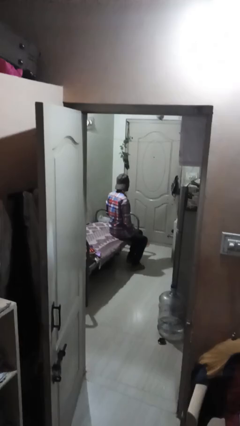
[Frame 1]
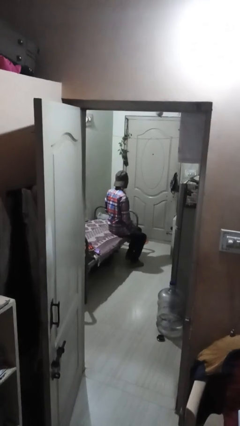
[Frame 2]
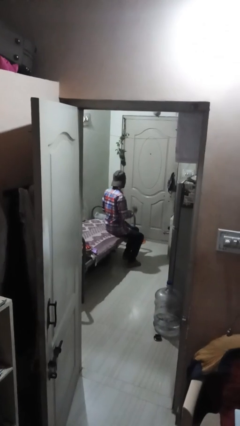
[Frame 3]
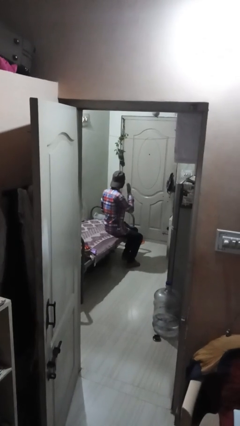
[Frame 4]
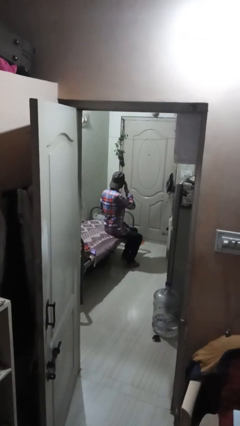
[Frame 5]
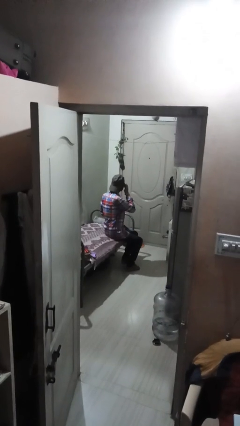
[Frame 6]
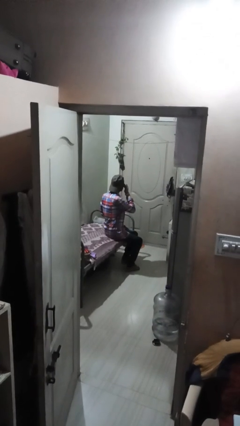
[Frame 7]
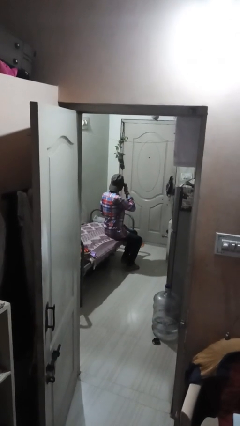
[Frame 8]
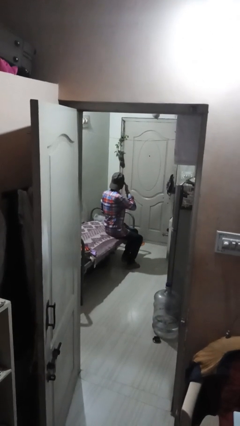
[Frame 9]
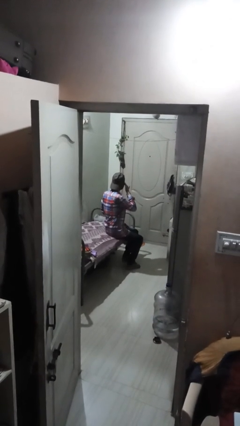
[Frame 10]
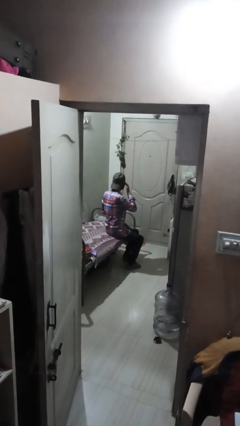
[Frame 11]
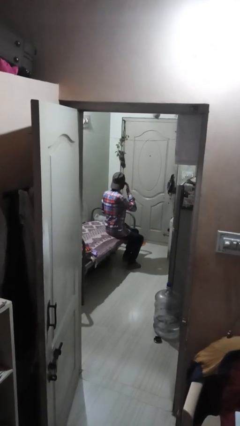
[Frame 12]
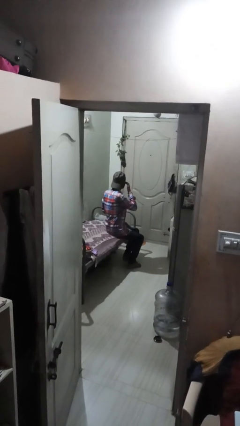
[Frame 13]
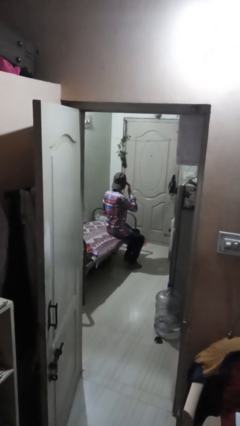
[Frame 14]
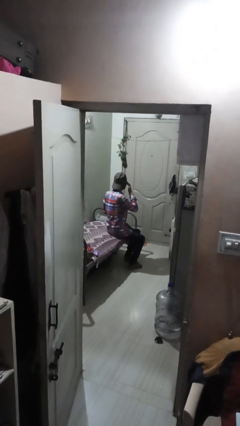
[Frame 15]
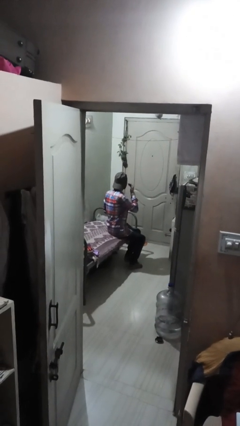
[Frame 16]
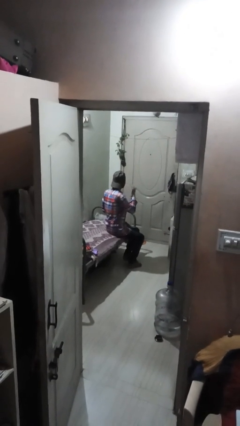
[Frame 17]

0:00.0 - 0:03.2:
person rubs eyes

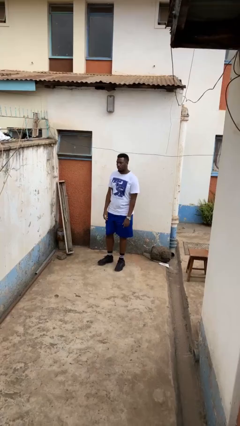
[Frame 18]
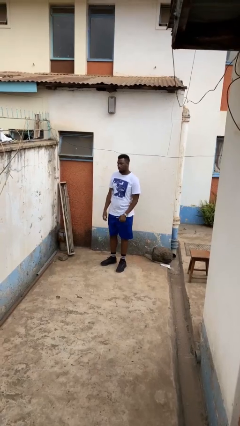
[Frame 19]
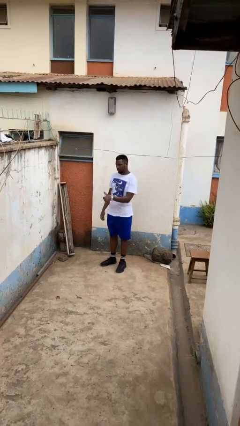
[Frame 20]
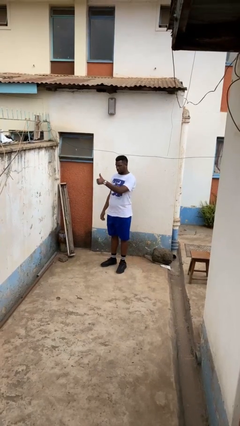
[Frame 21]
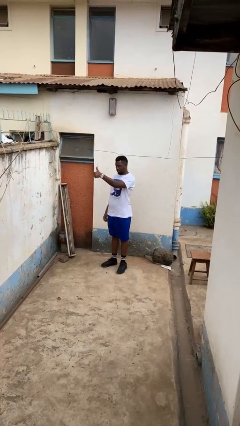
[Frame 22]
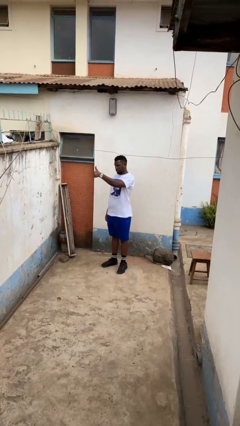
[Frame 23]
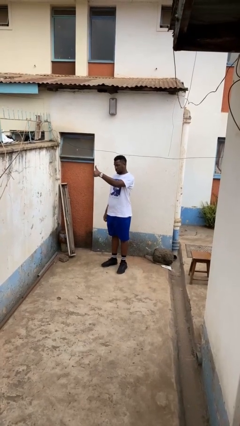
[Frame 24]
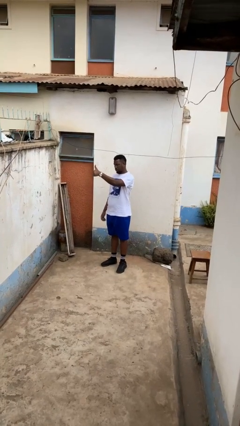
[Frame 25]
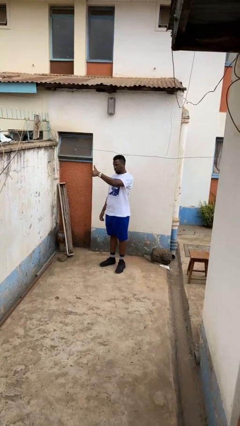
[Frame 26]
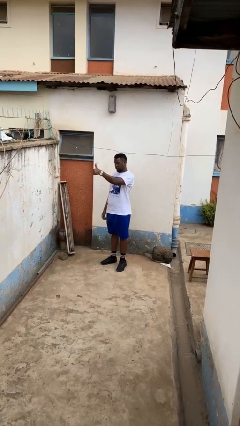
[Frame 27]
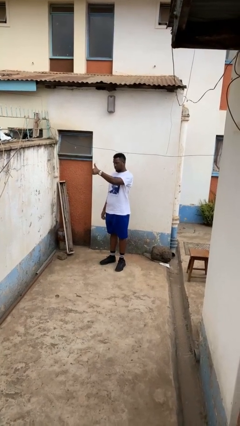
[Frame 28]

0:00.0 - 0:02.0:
person gestures thumbs up

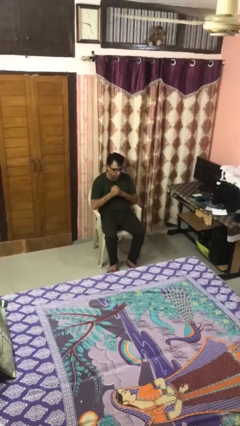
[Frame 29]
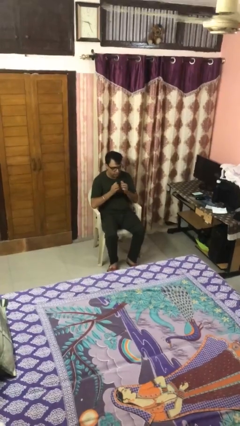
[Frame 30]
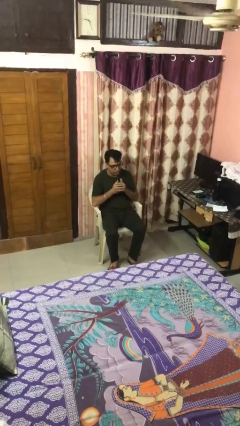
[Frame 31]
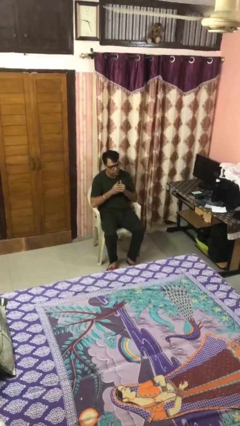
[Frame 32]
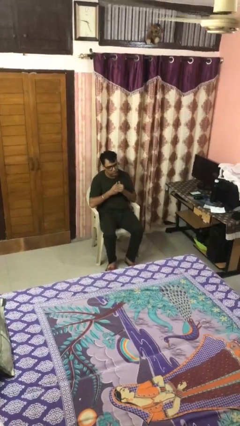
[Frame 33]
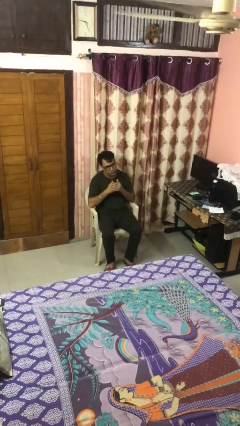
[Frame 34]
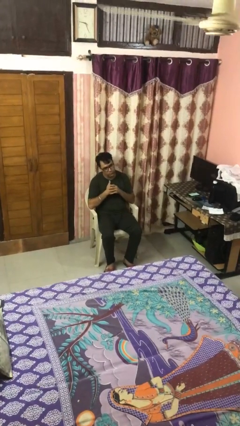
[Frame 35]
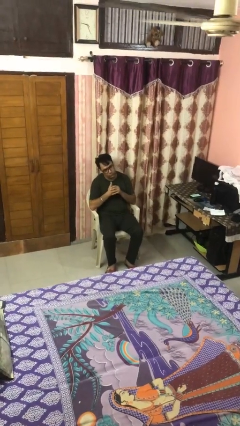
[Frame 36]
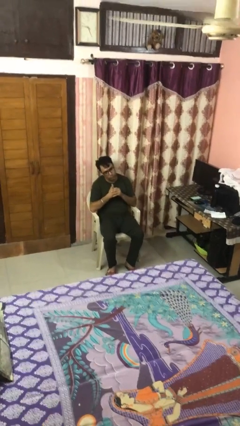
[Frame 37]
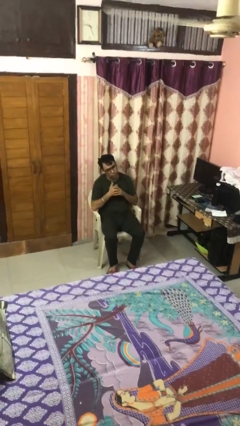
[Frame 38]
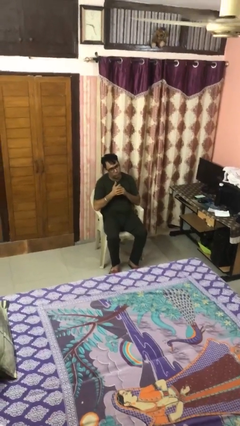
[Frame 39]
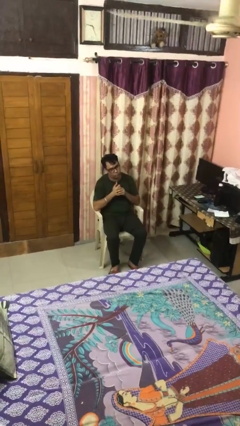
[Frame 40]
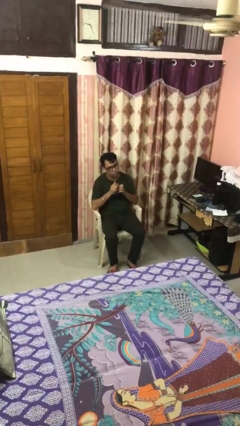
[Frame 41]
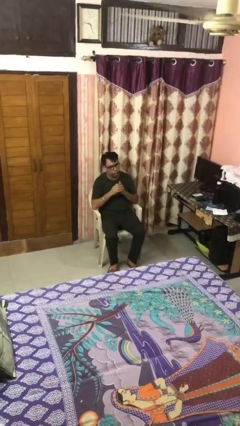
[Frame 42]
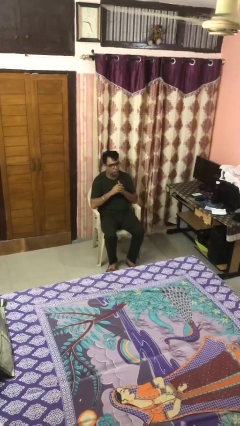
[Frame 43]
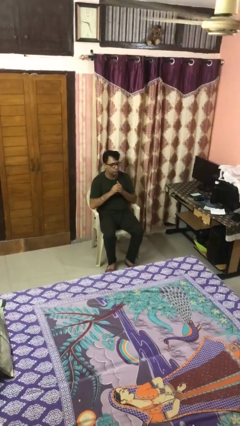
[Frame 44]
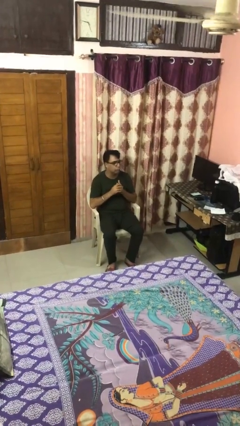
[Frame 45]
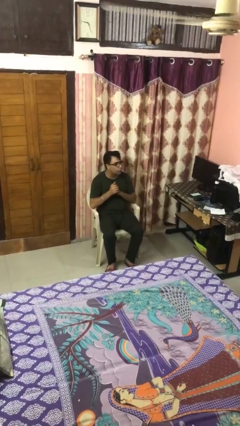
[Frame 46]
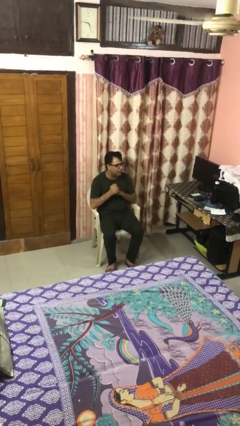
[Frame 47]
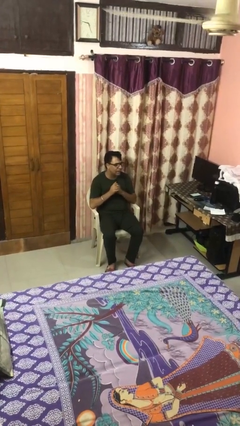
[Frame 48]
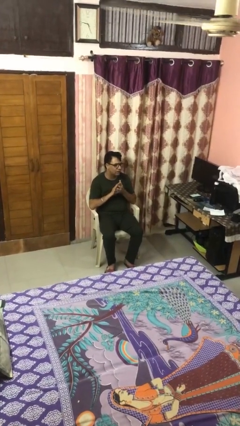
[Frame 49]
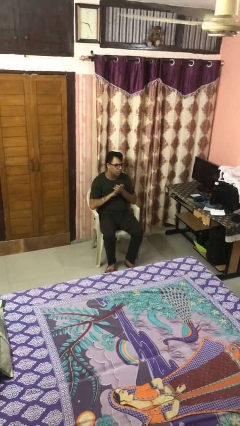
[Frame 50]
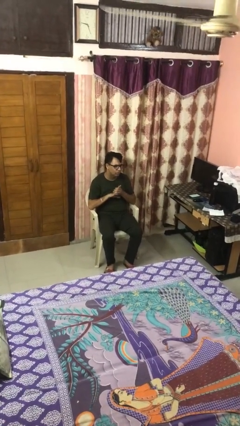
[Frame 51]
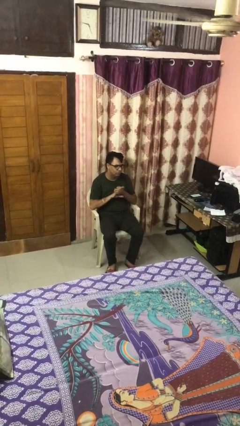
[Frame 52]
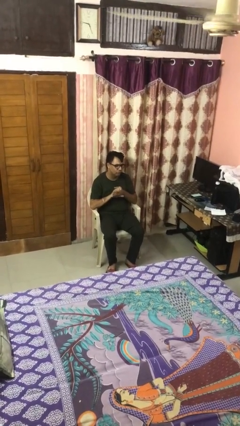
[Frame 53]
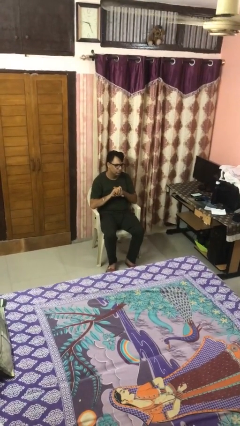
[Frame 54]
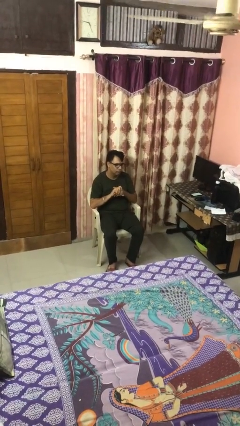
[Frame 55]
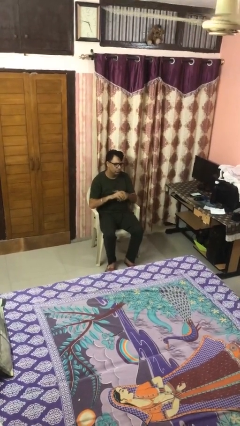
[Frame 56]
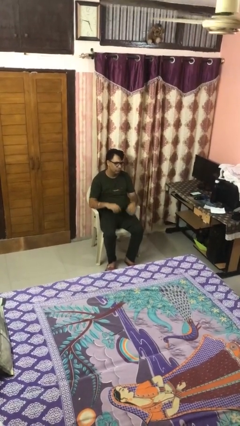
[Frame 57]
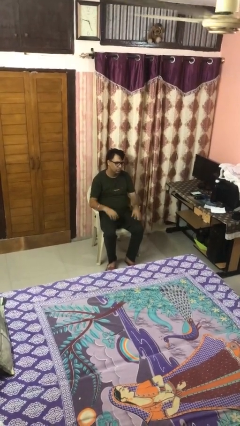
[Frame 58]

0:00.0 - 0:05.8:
person cracks knuckles

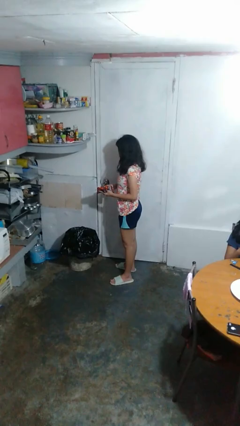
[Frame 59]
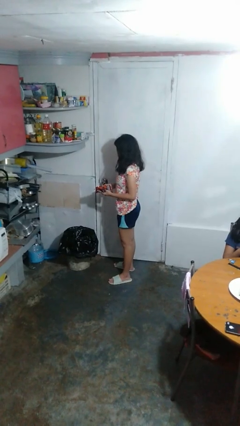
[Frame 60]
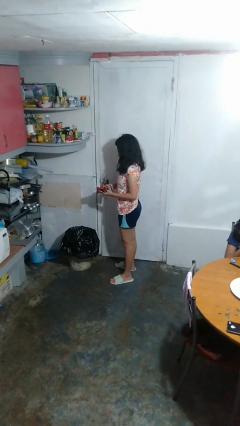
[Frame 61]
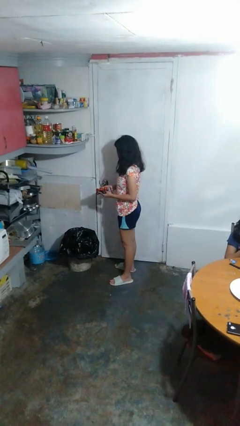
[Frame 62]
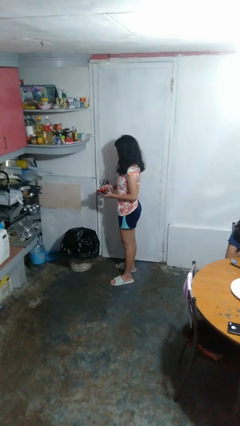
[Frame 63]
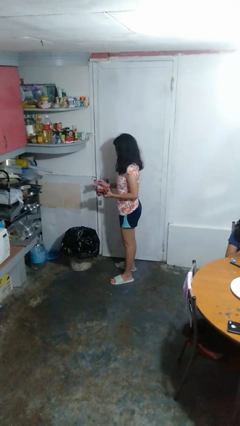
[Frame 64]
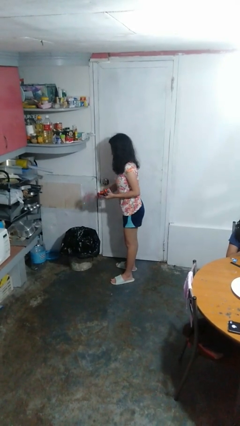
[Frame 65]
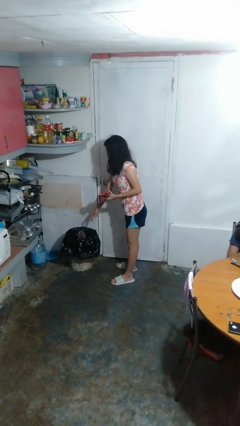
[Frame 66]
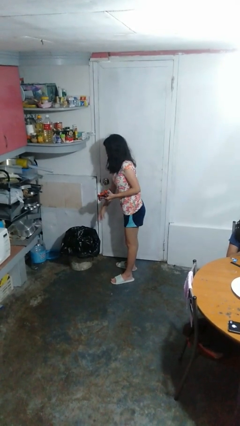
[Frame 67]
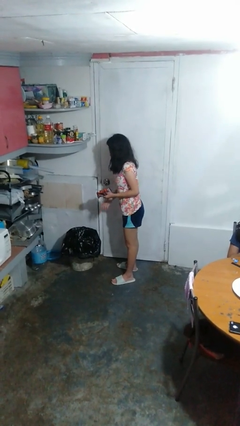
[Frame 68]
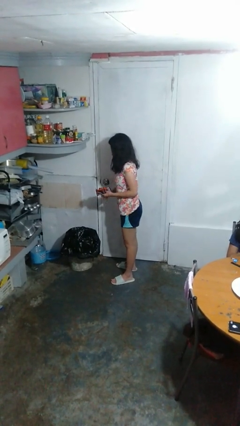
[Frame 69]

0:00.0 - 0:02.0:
person discards trash

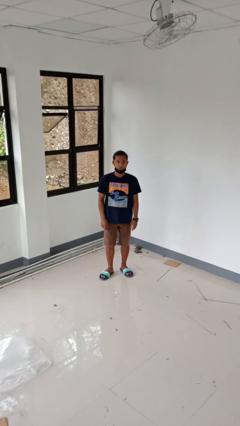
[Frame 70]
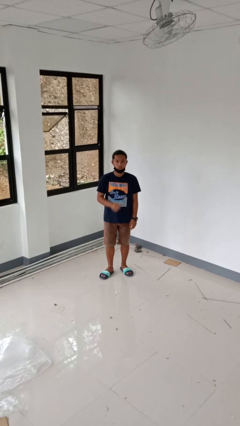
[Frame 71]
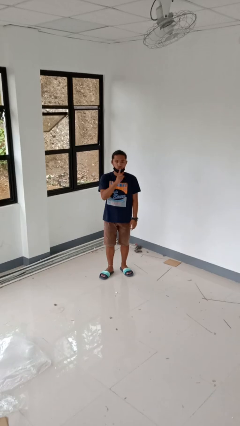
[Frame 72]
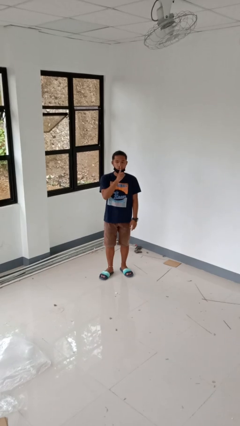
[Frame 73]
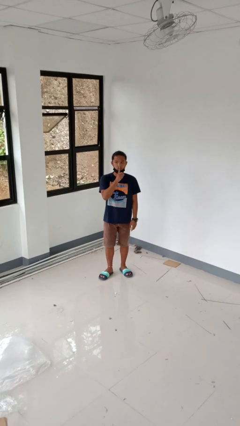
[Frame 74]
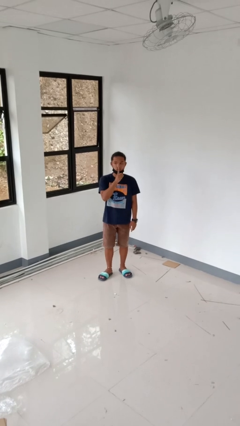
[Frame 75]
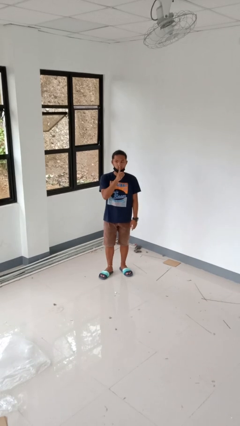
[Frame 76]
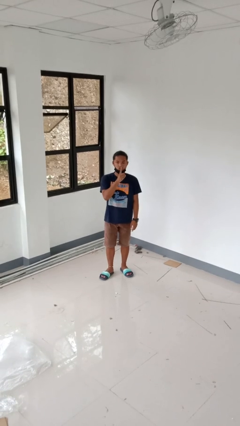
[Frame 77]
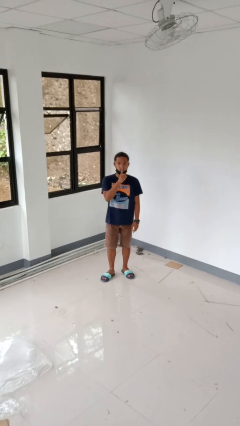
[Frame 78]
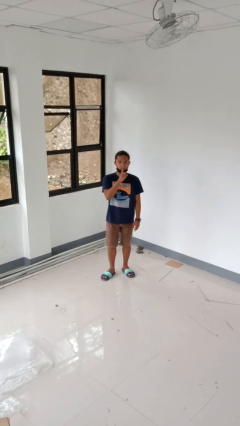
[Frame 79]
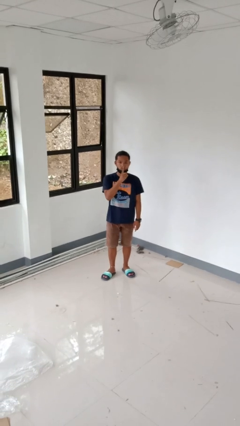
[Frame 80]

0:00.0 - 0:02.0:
person gestures be quiet

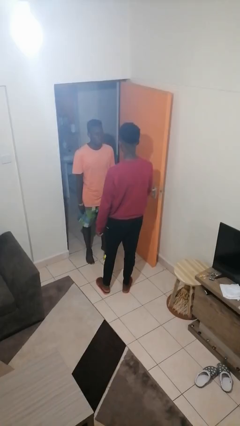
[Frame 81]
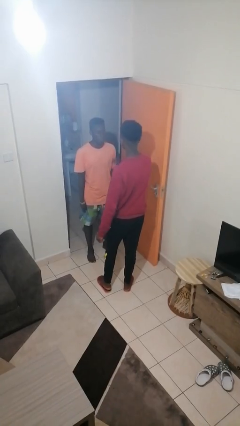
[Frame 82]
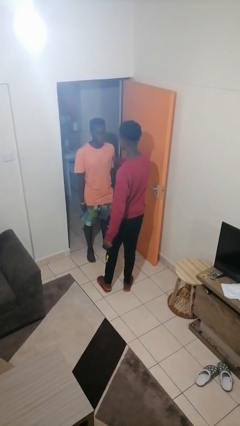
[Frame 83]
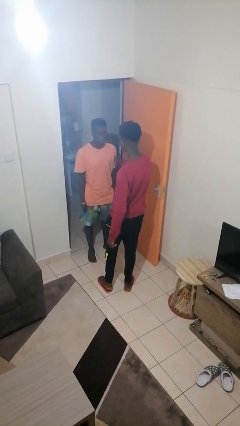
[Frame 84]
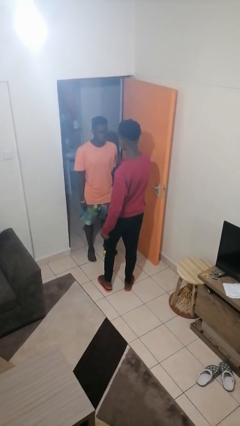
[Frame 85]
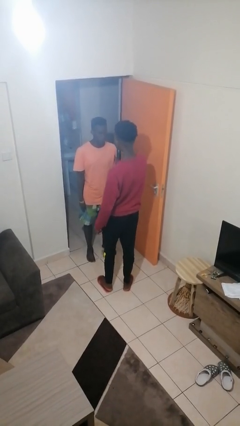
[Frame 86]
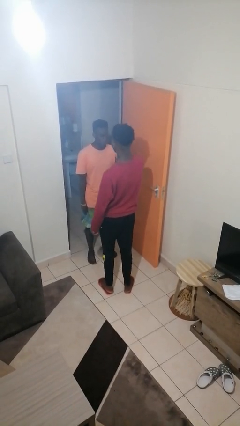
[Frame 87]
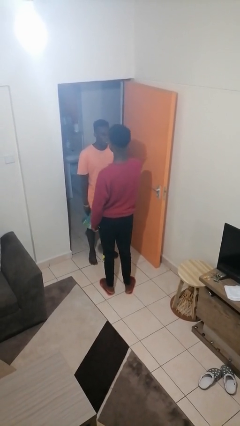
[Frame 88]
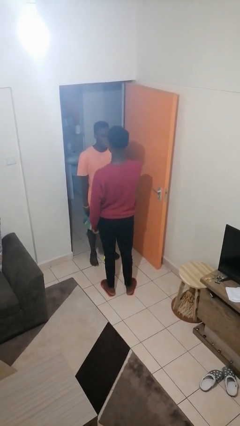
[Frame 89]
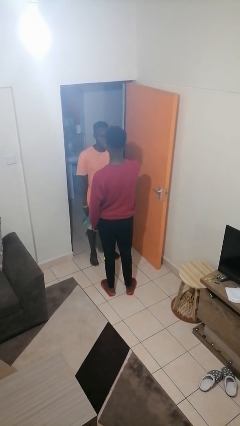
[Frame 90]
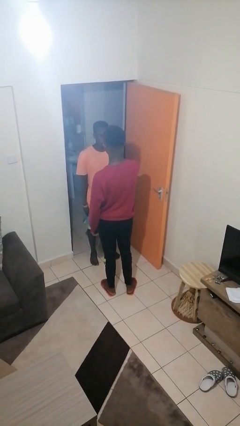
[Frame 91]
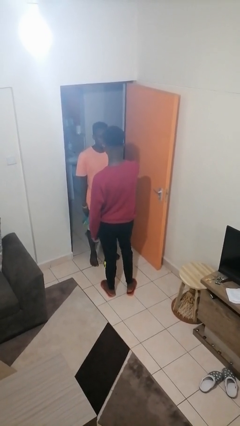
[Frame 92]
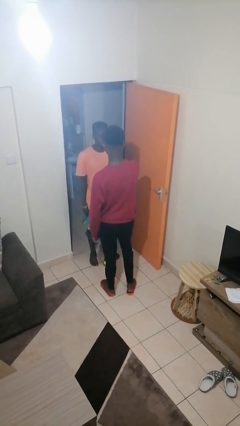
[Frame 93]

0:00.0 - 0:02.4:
person grabs person by bicep
